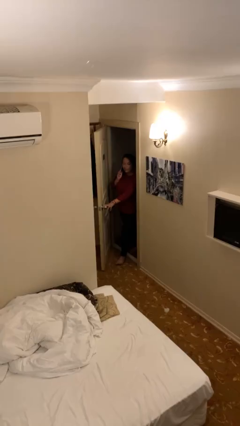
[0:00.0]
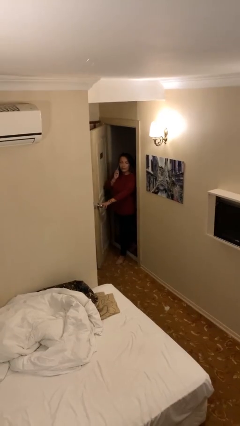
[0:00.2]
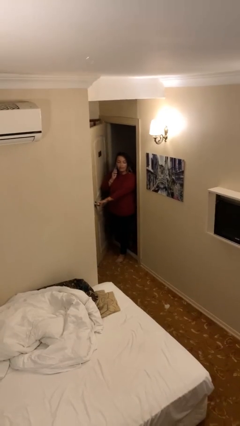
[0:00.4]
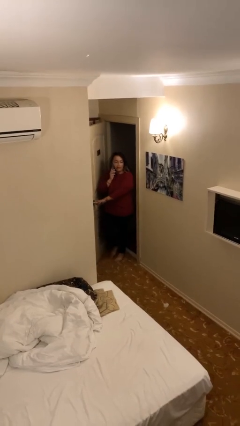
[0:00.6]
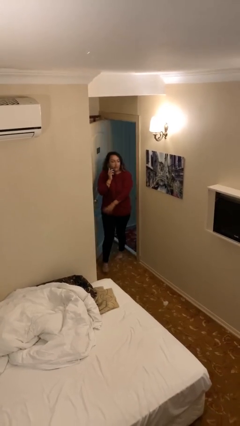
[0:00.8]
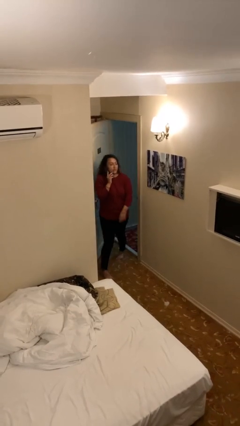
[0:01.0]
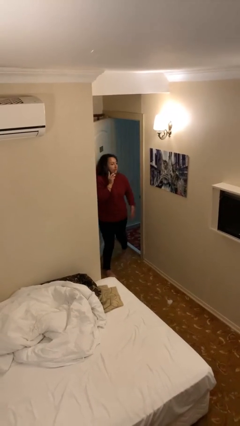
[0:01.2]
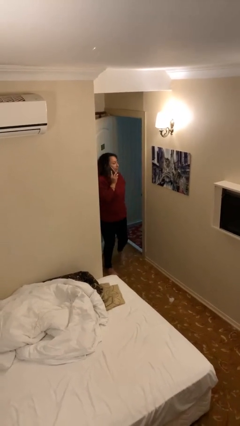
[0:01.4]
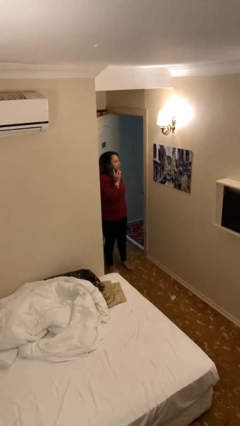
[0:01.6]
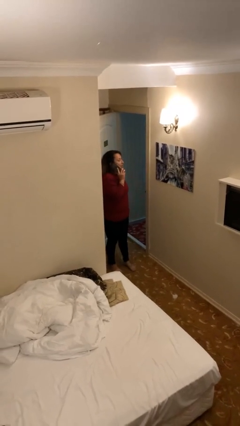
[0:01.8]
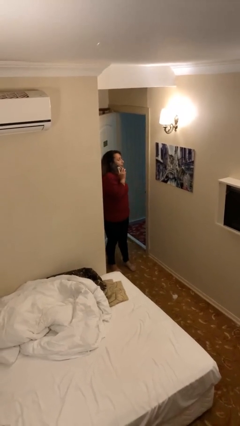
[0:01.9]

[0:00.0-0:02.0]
person enters scene through structure

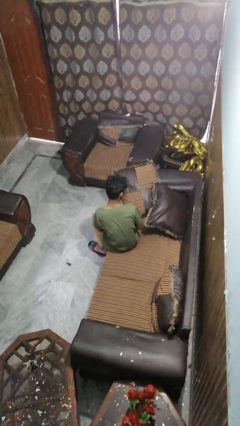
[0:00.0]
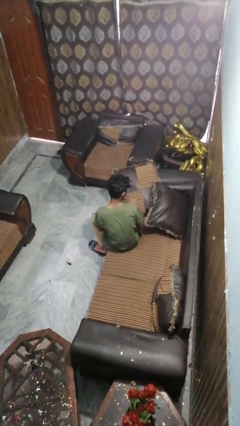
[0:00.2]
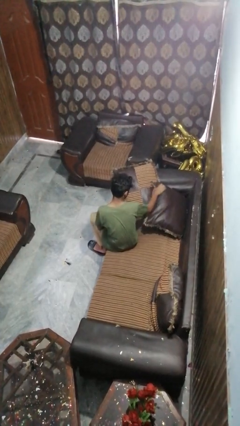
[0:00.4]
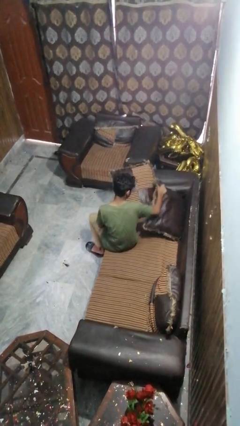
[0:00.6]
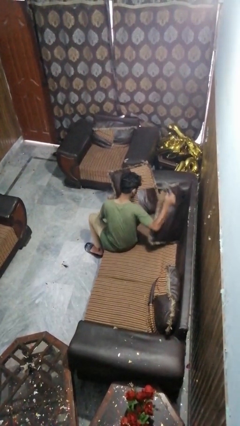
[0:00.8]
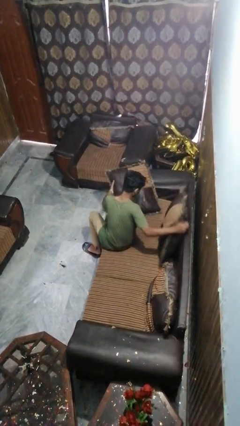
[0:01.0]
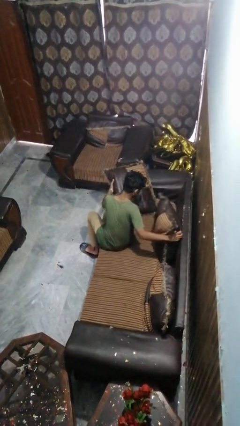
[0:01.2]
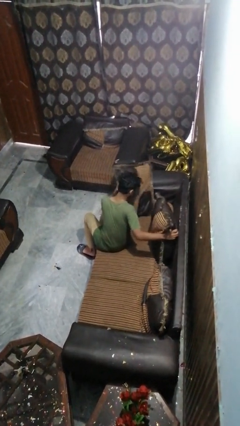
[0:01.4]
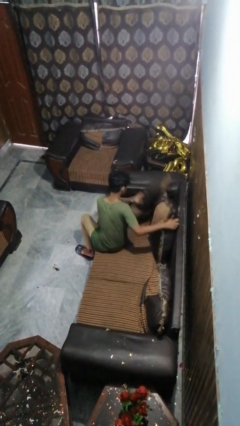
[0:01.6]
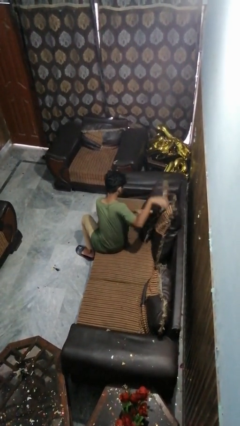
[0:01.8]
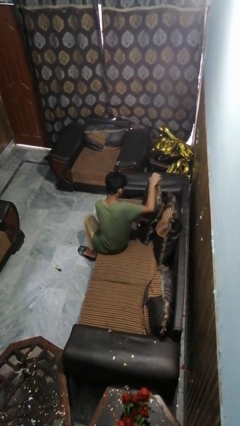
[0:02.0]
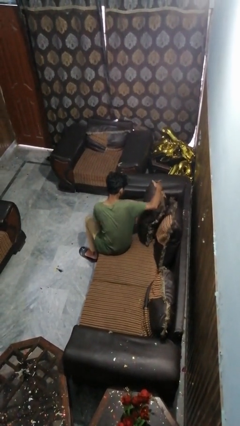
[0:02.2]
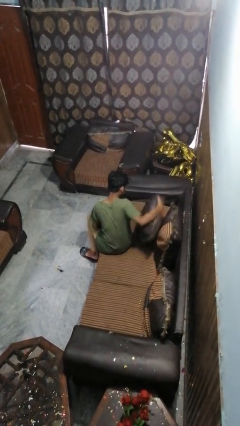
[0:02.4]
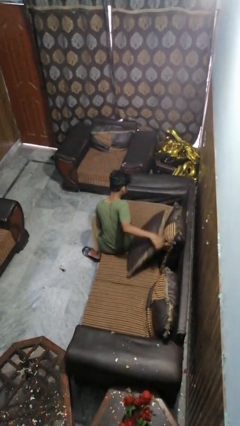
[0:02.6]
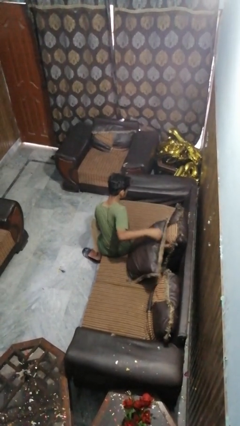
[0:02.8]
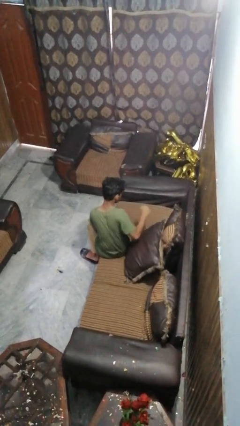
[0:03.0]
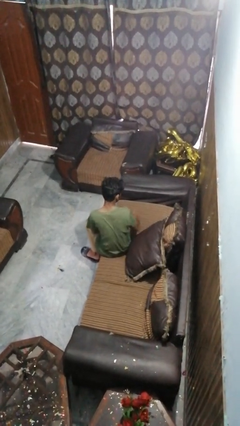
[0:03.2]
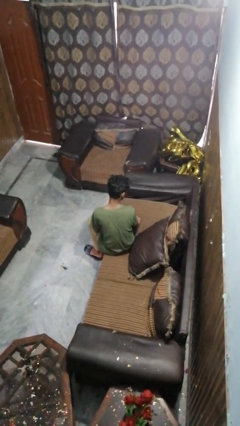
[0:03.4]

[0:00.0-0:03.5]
person searches in couch

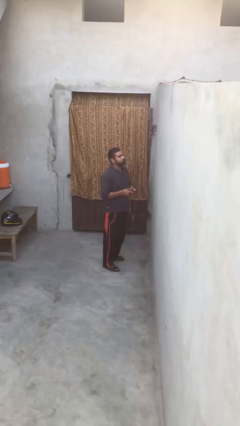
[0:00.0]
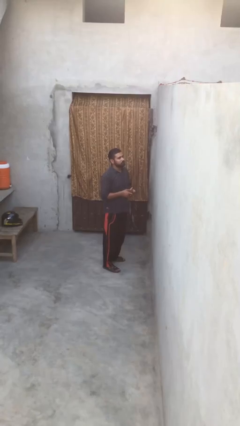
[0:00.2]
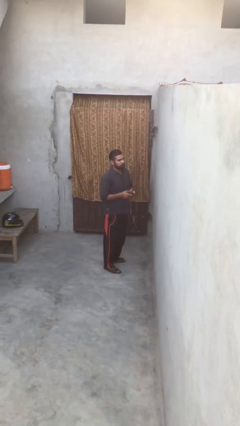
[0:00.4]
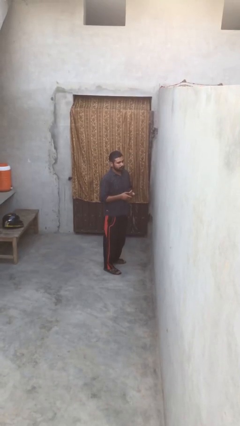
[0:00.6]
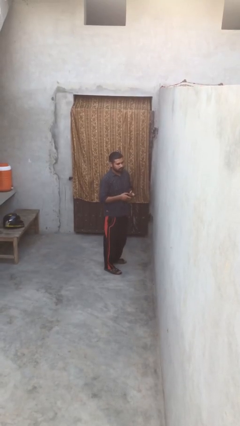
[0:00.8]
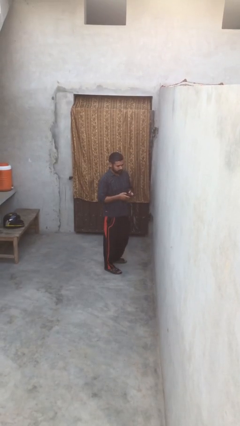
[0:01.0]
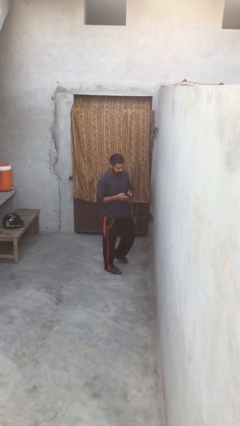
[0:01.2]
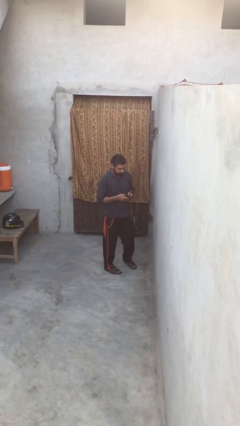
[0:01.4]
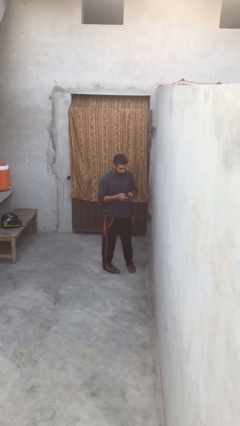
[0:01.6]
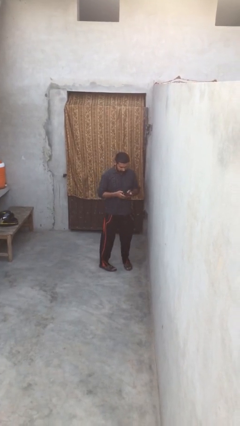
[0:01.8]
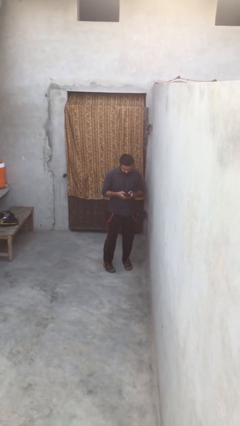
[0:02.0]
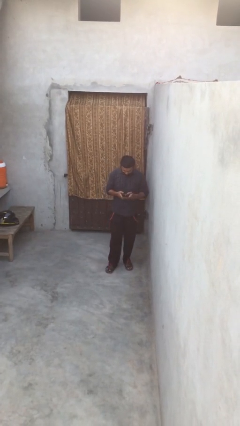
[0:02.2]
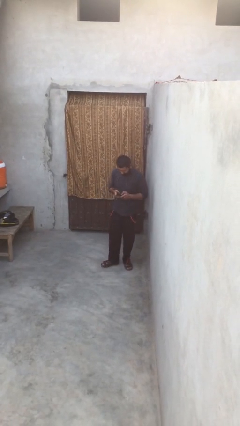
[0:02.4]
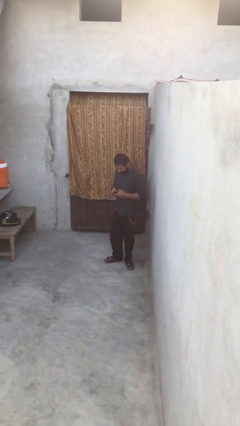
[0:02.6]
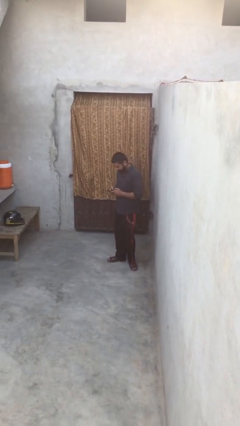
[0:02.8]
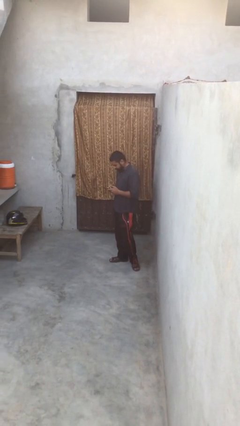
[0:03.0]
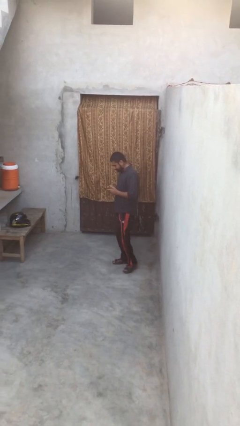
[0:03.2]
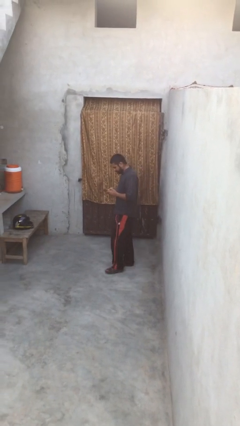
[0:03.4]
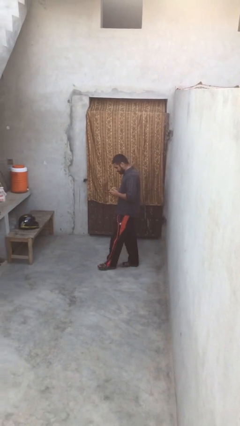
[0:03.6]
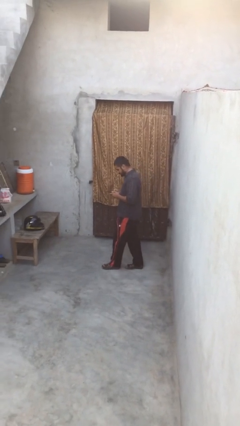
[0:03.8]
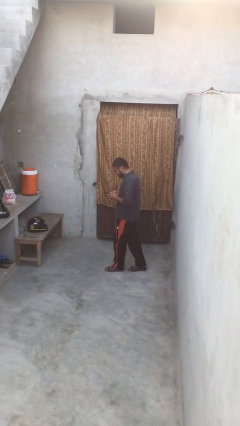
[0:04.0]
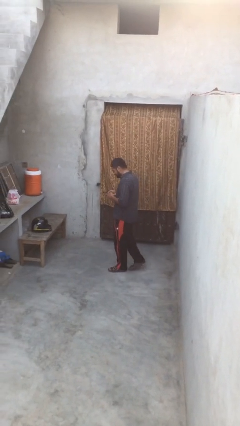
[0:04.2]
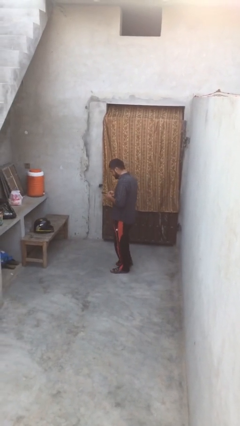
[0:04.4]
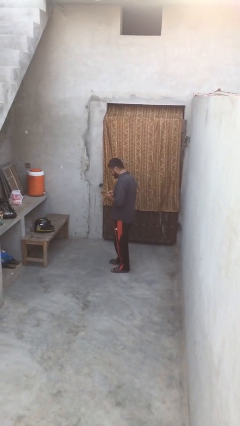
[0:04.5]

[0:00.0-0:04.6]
person texts on phone

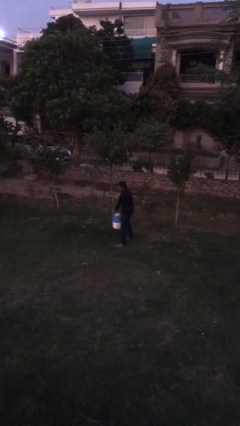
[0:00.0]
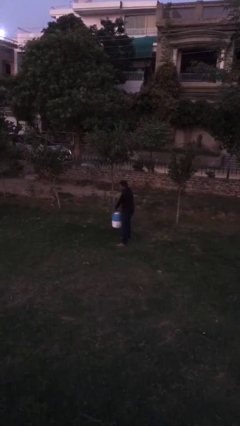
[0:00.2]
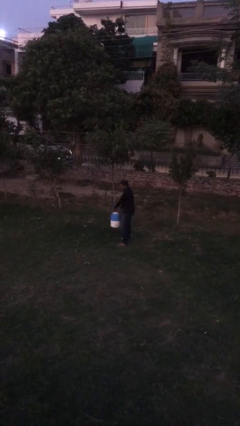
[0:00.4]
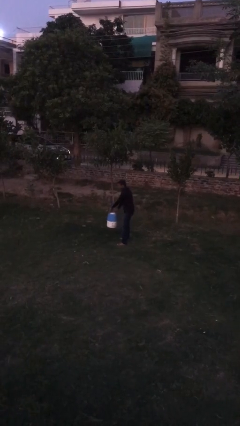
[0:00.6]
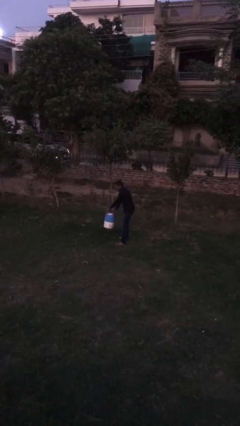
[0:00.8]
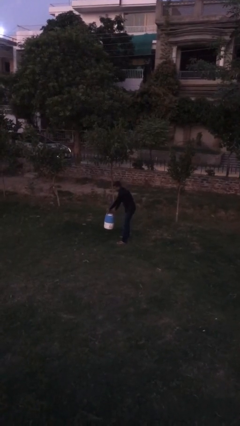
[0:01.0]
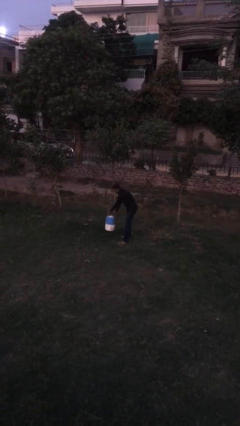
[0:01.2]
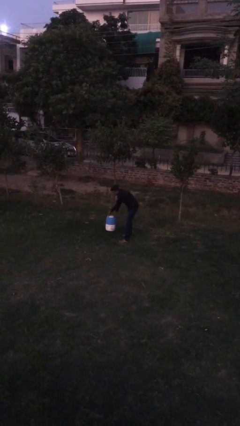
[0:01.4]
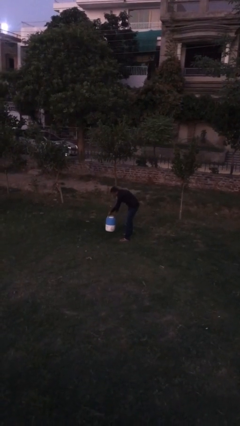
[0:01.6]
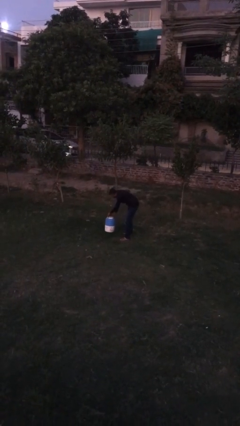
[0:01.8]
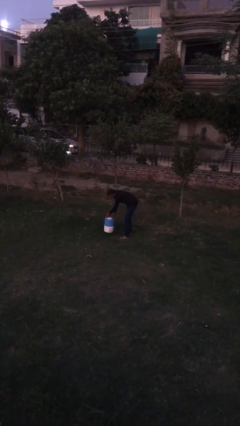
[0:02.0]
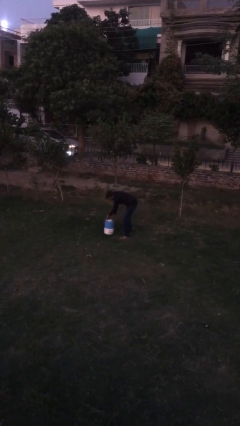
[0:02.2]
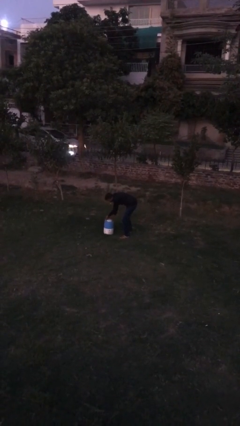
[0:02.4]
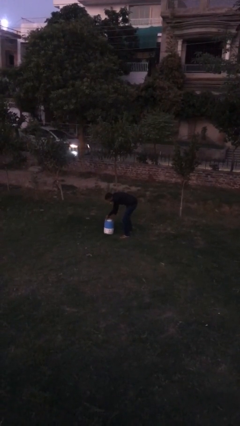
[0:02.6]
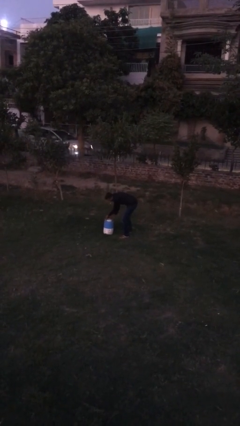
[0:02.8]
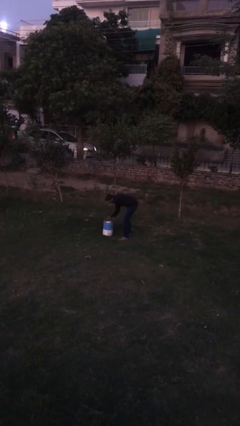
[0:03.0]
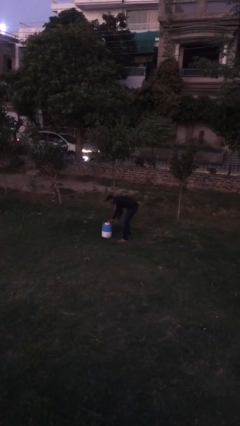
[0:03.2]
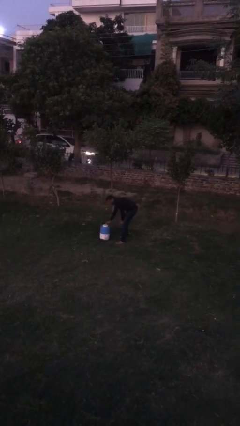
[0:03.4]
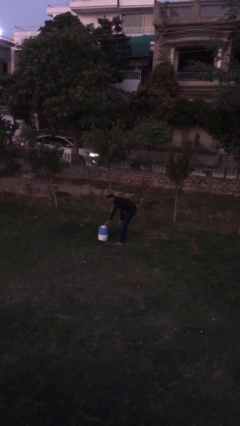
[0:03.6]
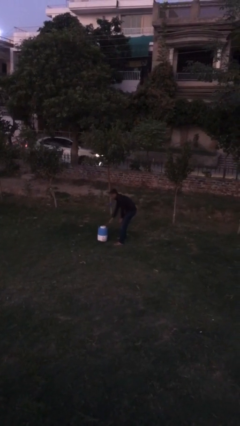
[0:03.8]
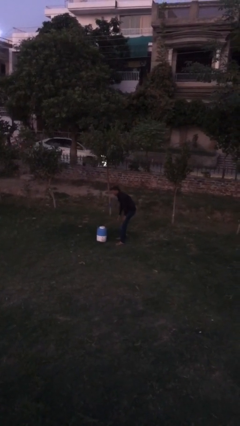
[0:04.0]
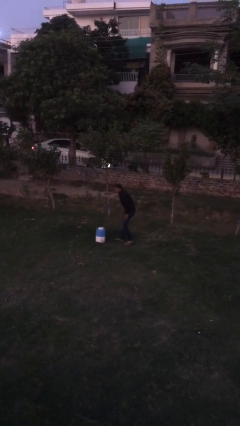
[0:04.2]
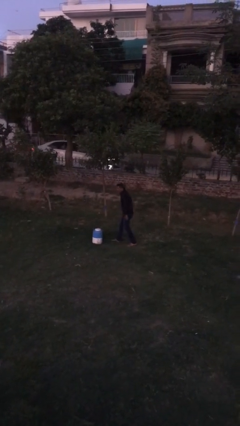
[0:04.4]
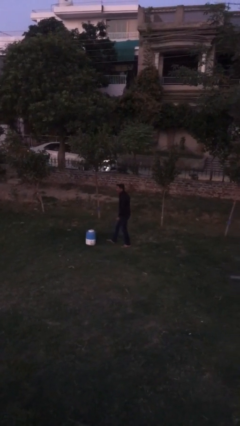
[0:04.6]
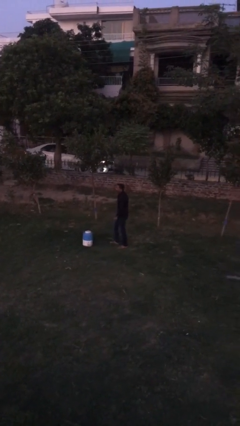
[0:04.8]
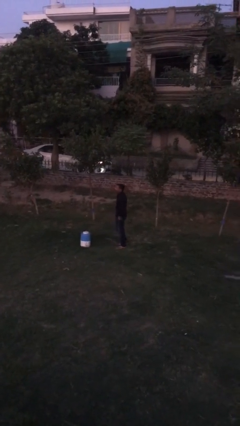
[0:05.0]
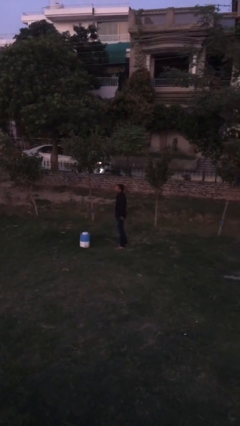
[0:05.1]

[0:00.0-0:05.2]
person puts down object on floor

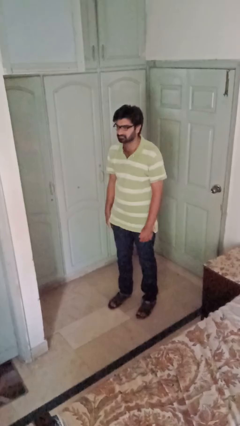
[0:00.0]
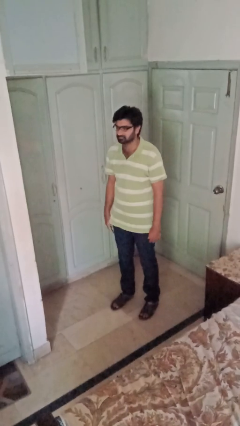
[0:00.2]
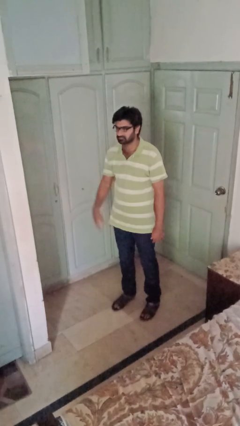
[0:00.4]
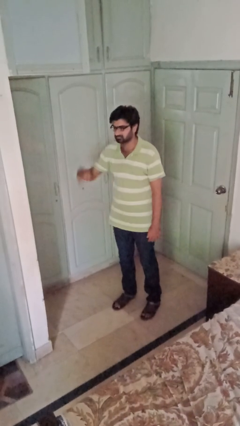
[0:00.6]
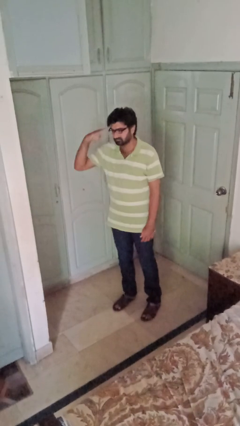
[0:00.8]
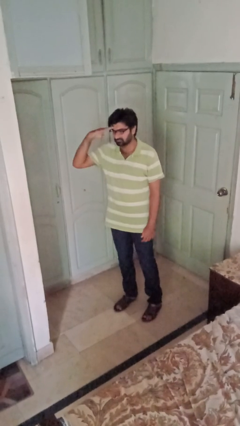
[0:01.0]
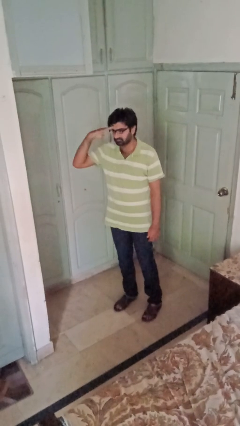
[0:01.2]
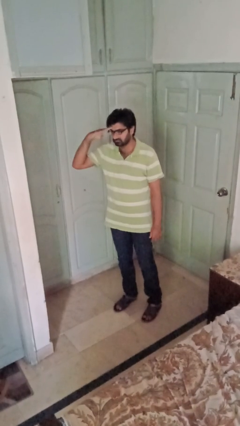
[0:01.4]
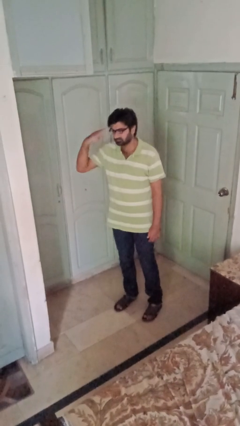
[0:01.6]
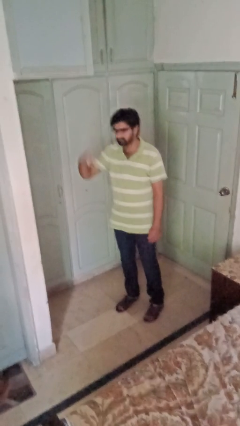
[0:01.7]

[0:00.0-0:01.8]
person salutes

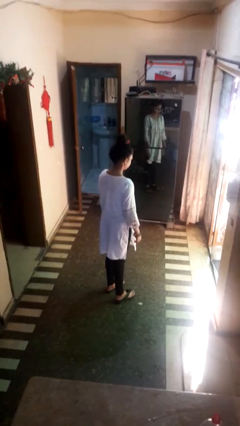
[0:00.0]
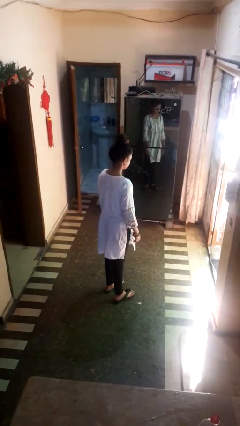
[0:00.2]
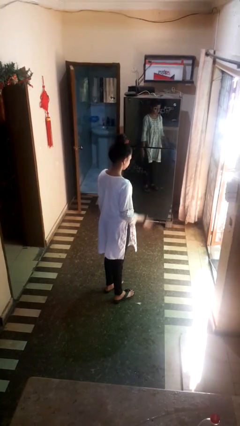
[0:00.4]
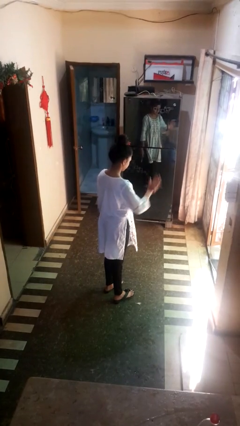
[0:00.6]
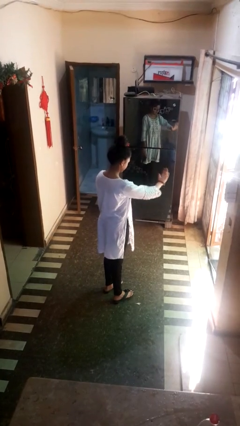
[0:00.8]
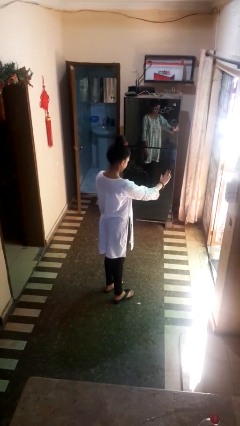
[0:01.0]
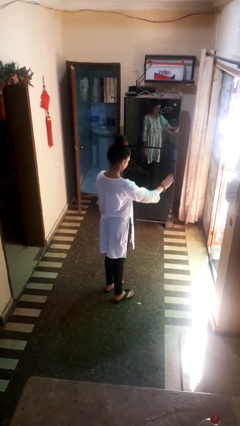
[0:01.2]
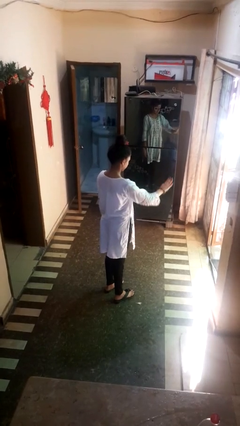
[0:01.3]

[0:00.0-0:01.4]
person gestures stop
